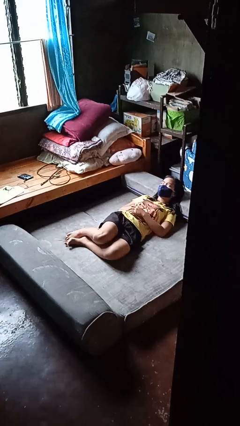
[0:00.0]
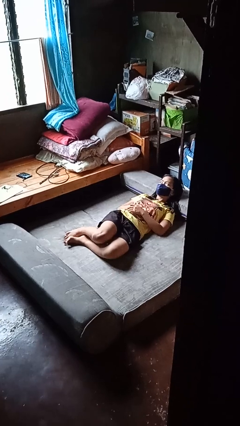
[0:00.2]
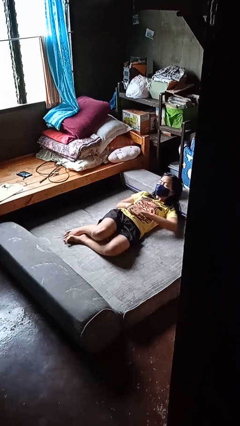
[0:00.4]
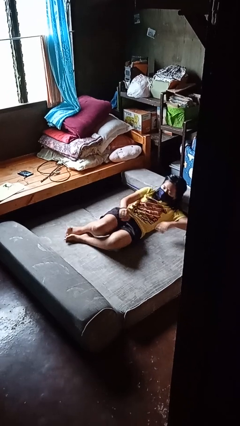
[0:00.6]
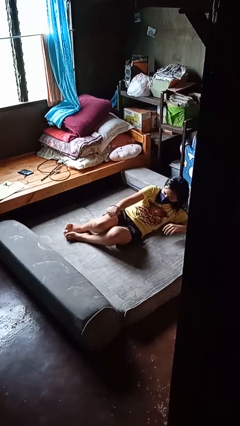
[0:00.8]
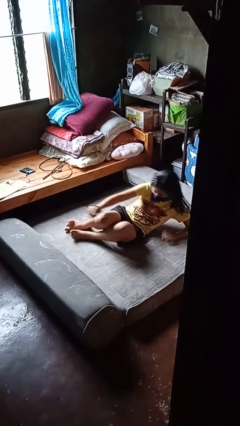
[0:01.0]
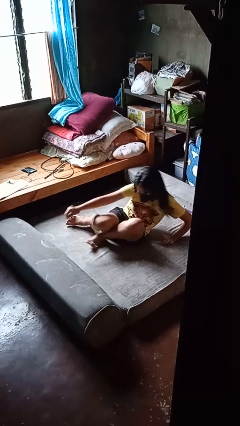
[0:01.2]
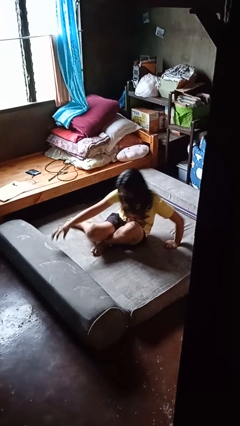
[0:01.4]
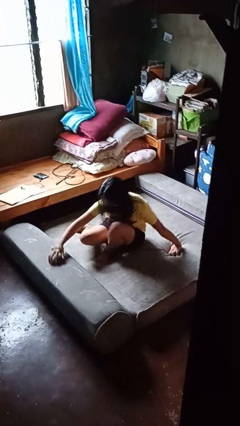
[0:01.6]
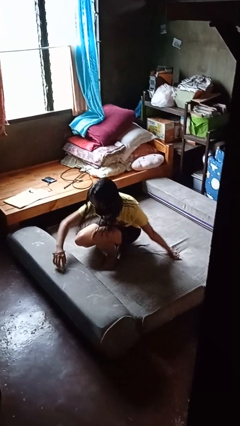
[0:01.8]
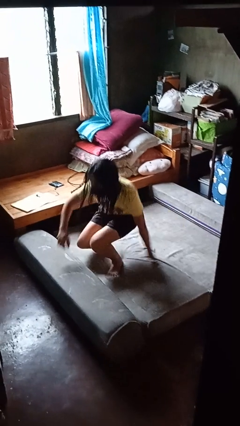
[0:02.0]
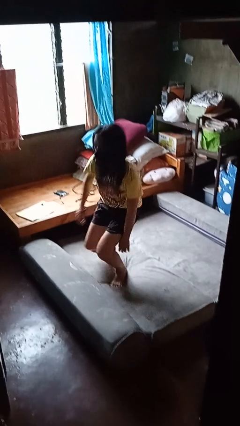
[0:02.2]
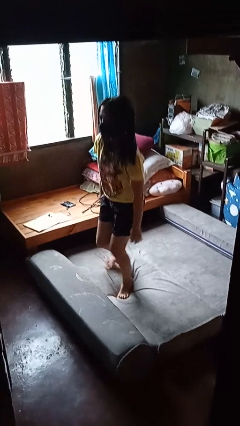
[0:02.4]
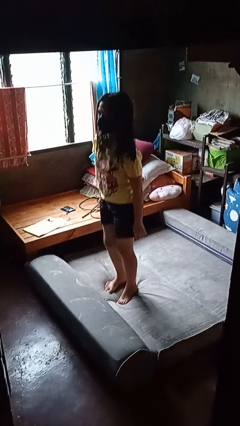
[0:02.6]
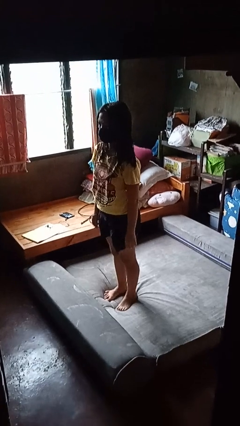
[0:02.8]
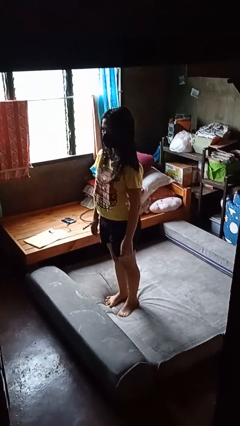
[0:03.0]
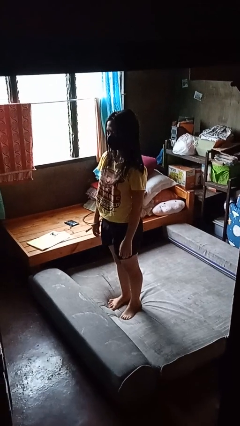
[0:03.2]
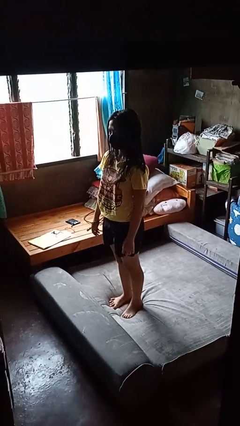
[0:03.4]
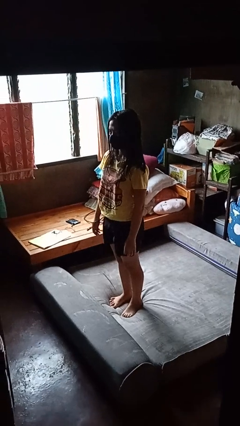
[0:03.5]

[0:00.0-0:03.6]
person stands up

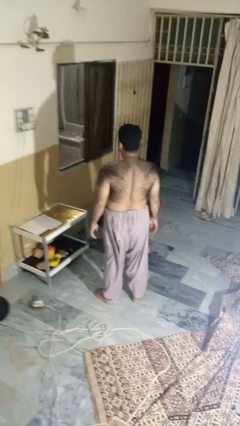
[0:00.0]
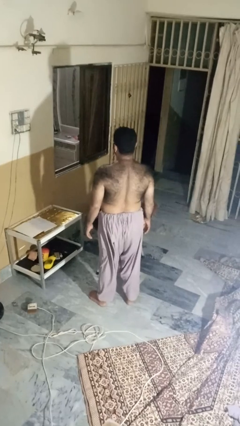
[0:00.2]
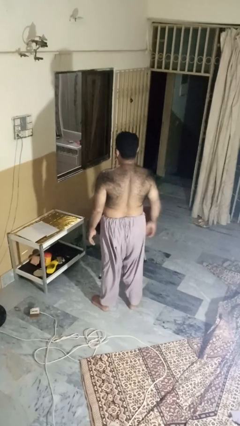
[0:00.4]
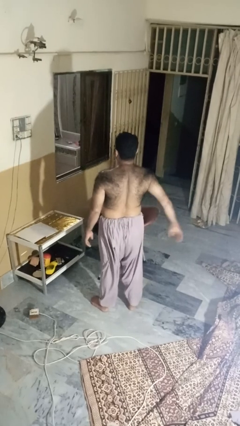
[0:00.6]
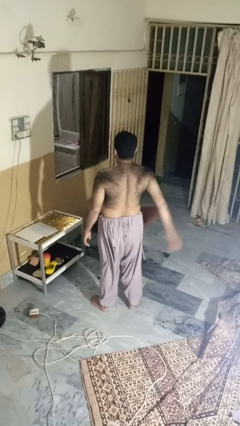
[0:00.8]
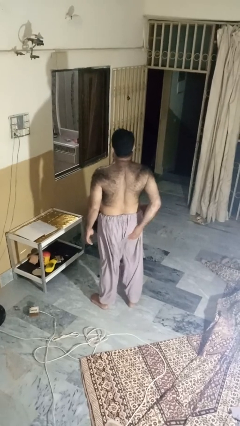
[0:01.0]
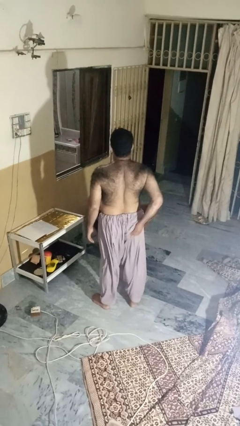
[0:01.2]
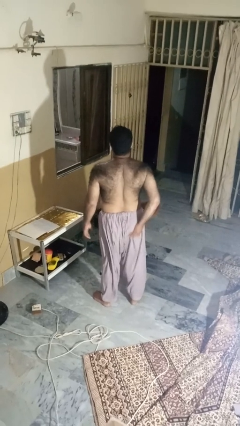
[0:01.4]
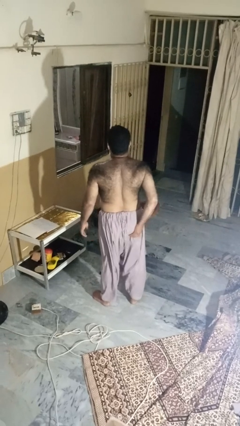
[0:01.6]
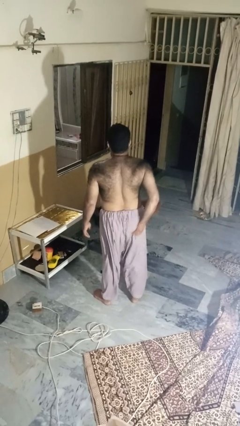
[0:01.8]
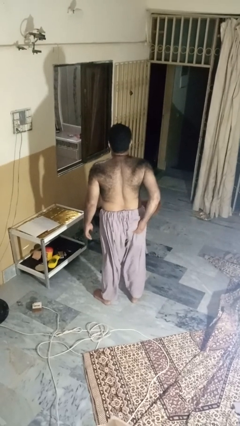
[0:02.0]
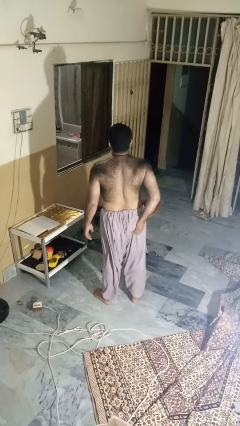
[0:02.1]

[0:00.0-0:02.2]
person wiggles hips

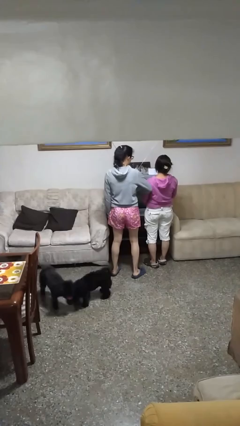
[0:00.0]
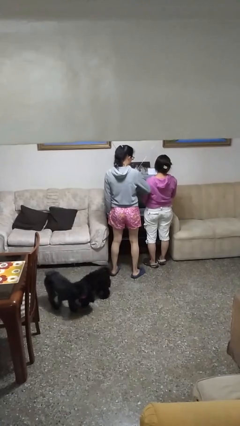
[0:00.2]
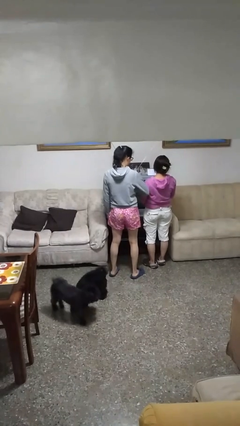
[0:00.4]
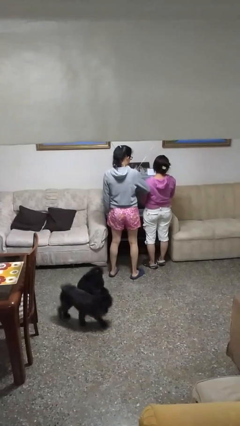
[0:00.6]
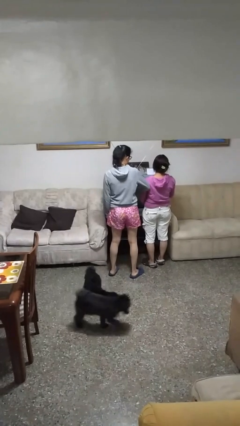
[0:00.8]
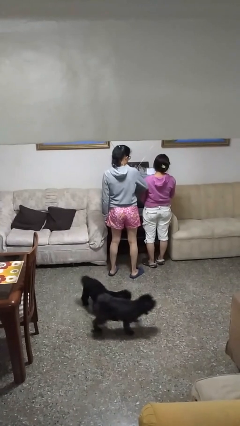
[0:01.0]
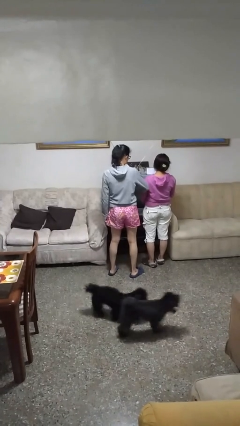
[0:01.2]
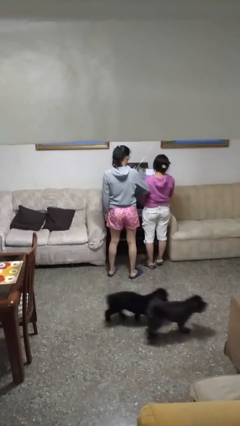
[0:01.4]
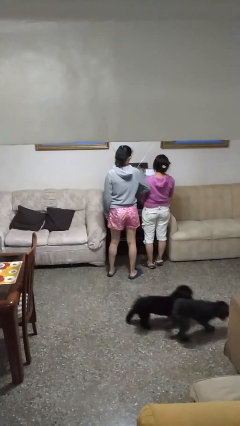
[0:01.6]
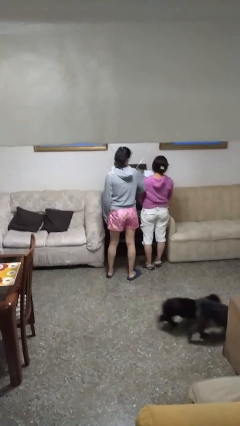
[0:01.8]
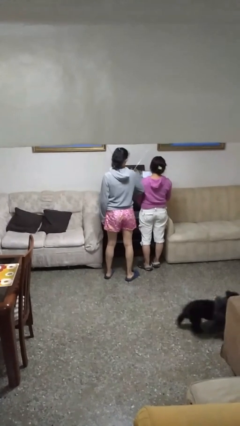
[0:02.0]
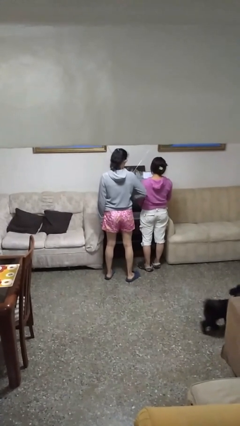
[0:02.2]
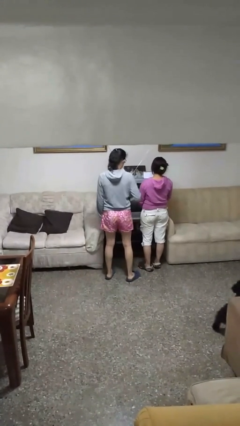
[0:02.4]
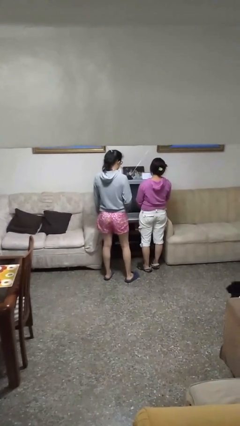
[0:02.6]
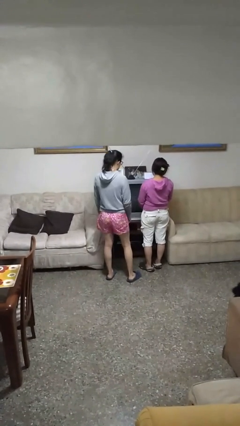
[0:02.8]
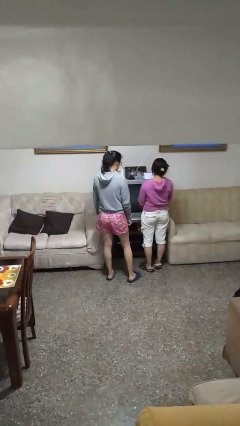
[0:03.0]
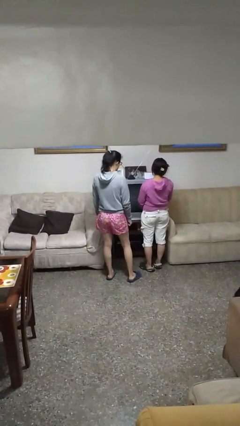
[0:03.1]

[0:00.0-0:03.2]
person nudges person with elbow

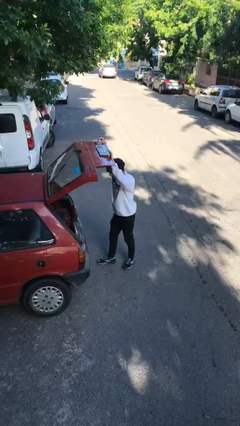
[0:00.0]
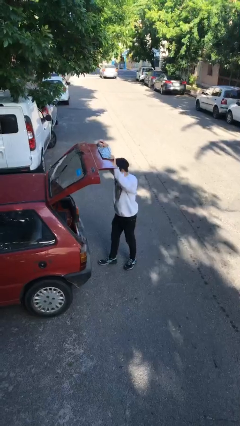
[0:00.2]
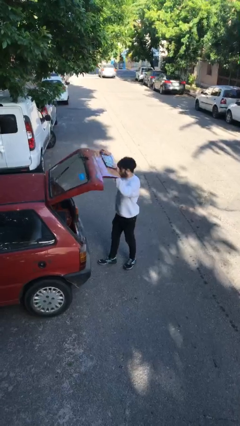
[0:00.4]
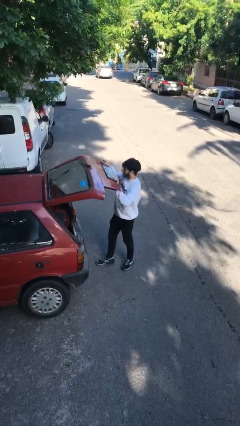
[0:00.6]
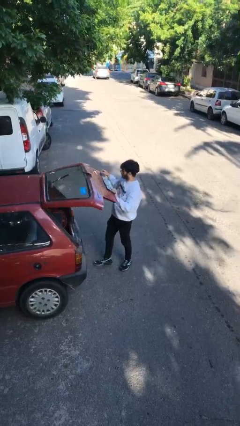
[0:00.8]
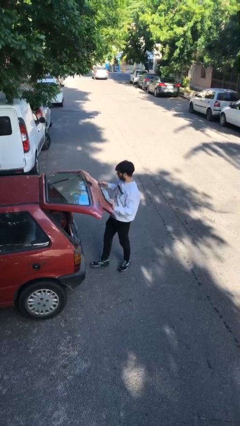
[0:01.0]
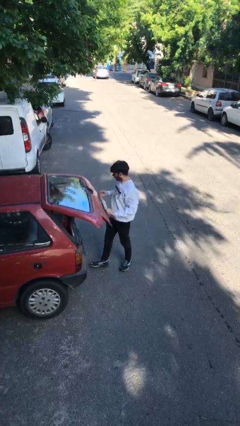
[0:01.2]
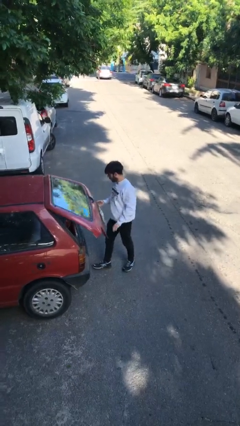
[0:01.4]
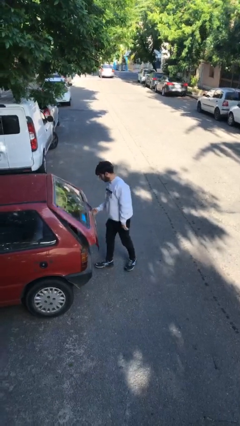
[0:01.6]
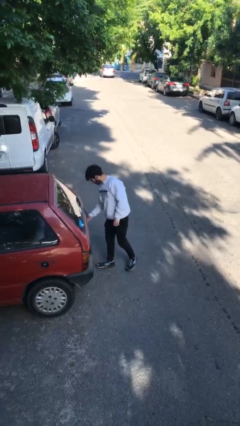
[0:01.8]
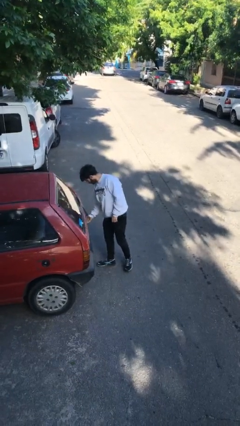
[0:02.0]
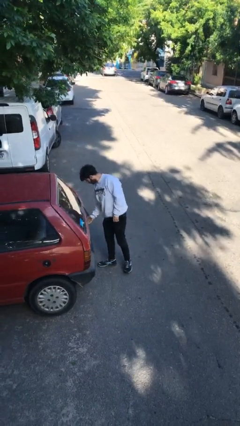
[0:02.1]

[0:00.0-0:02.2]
person closes car trunk

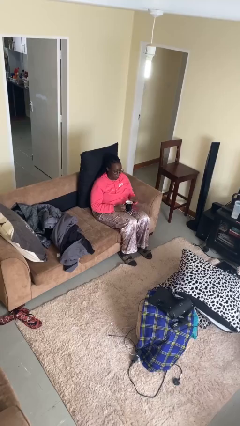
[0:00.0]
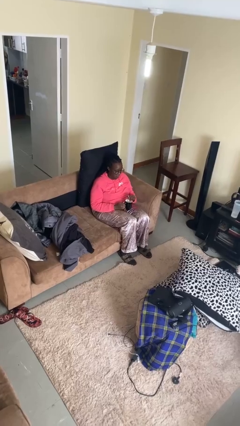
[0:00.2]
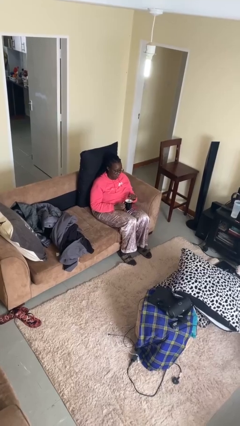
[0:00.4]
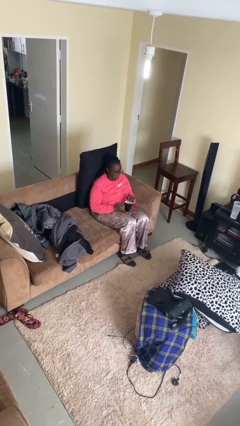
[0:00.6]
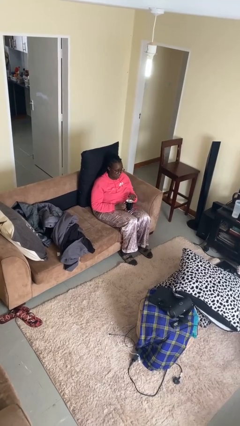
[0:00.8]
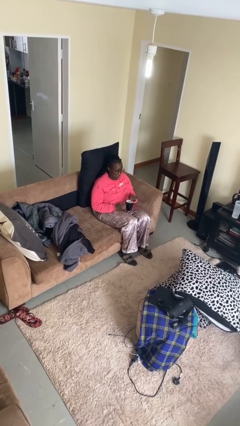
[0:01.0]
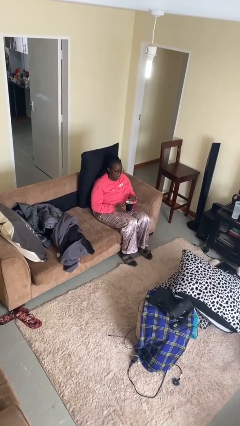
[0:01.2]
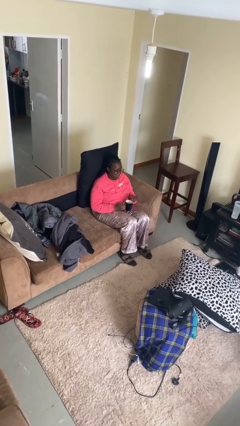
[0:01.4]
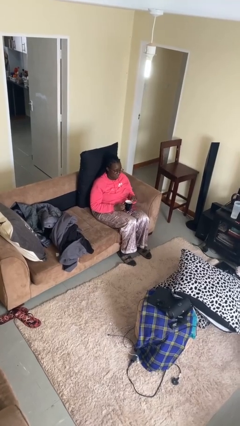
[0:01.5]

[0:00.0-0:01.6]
person stirs mug

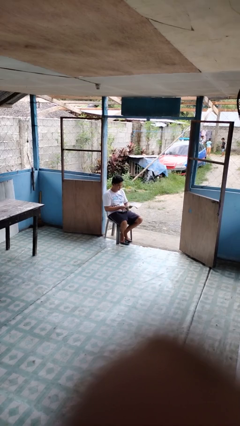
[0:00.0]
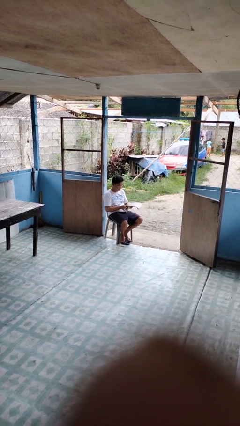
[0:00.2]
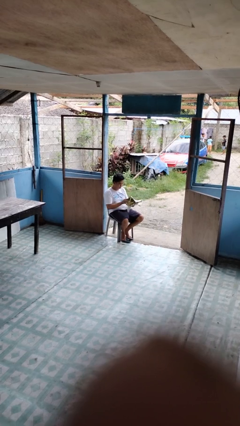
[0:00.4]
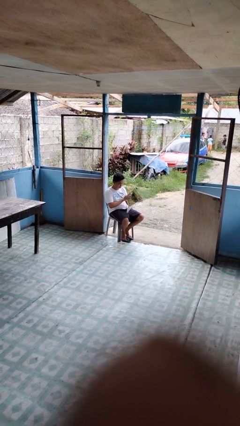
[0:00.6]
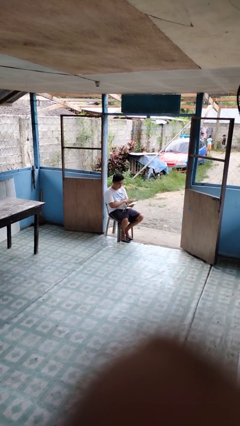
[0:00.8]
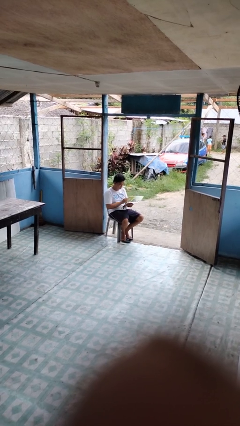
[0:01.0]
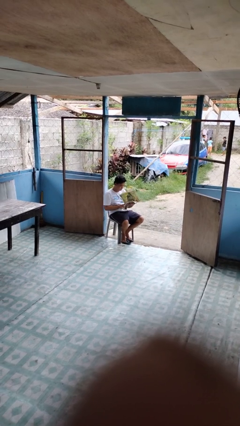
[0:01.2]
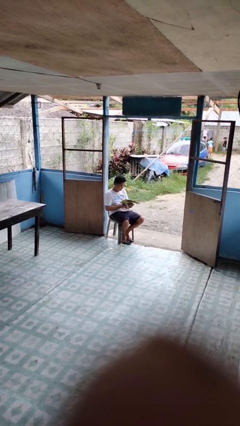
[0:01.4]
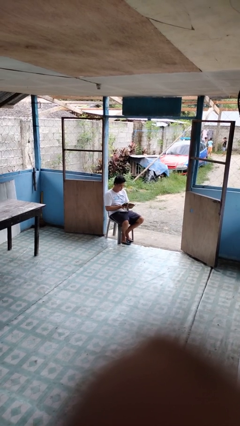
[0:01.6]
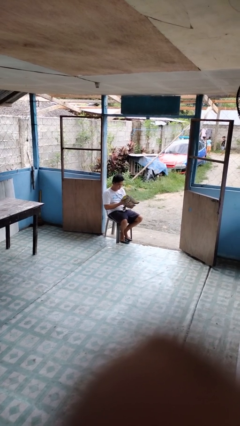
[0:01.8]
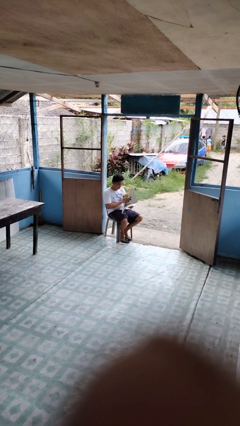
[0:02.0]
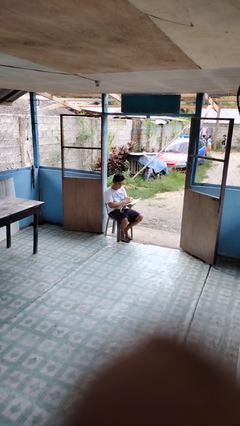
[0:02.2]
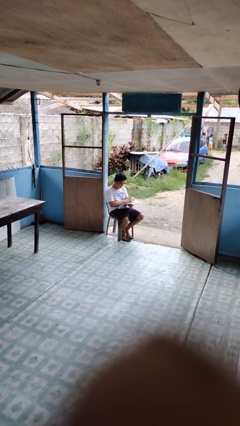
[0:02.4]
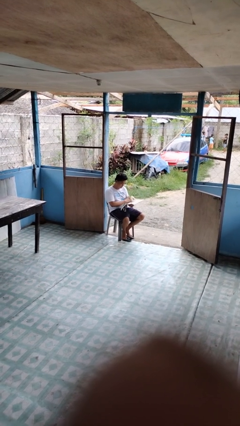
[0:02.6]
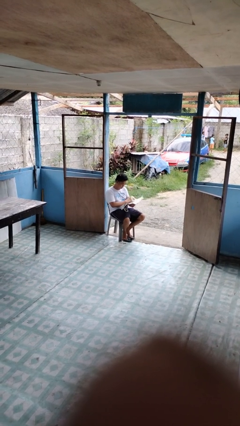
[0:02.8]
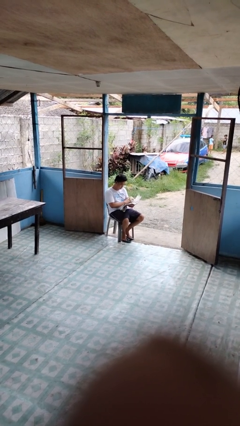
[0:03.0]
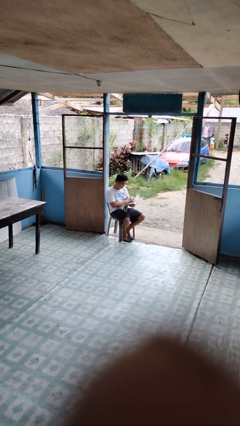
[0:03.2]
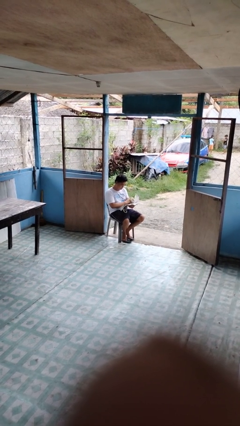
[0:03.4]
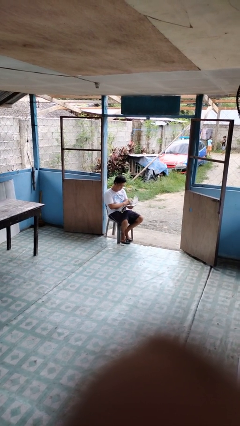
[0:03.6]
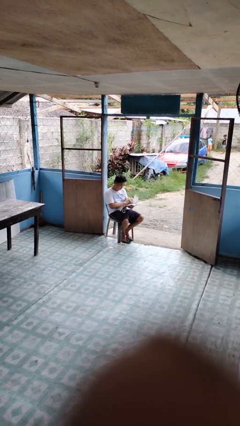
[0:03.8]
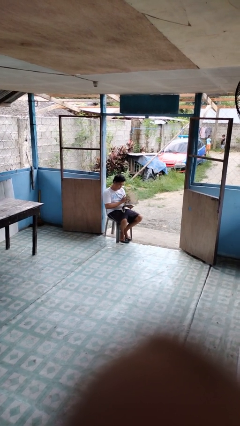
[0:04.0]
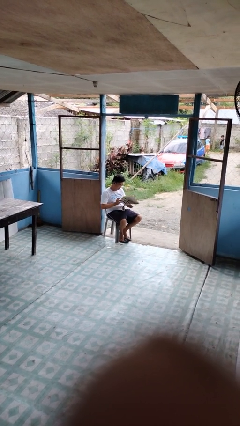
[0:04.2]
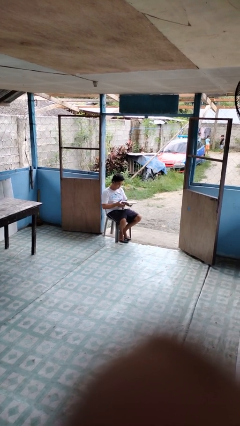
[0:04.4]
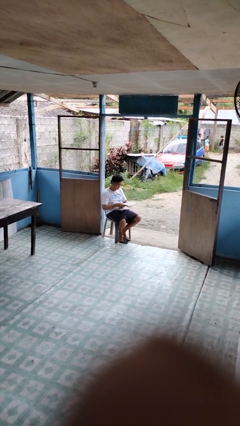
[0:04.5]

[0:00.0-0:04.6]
person reads newspaper
